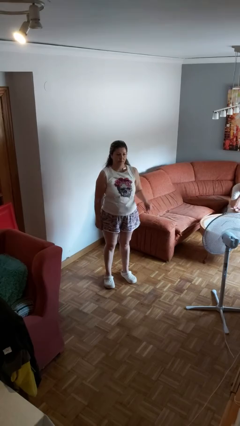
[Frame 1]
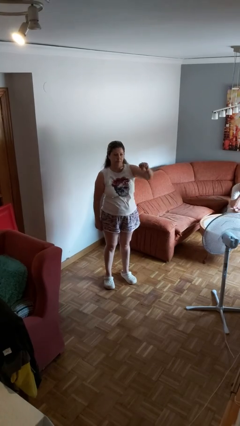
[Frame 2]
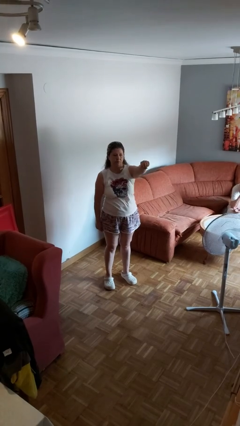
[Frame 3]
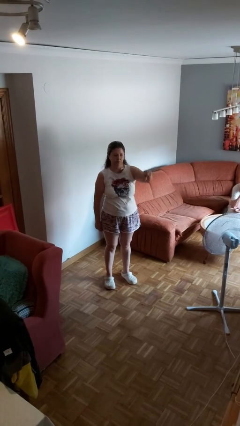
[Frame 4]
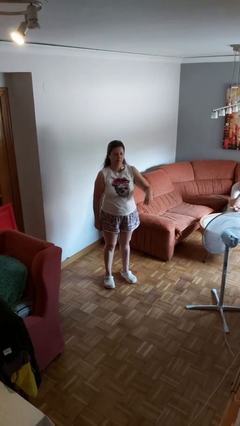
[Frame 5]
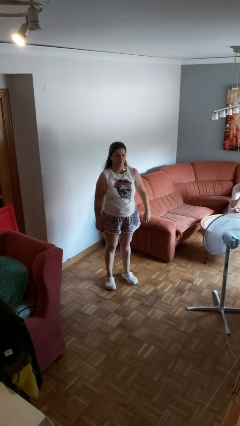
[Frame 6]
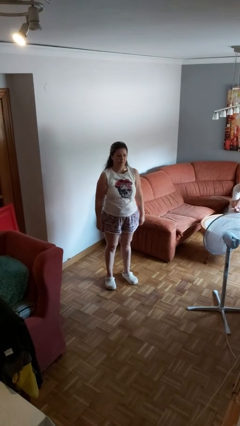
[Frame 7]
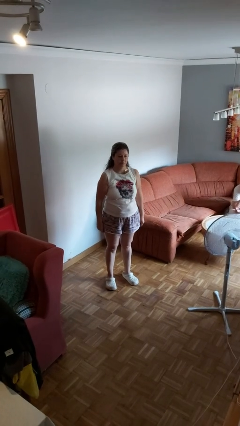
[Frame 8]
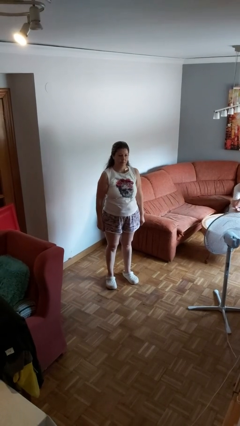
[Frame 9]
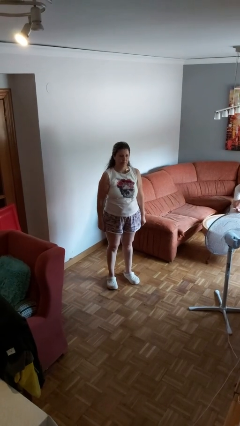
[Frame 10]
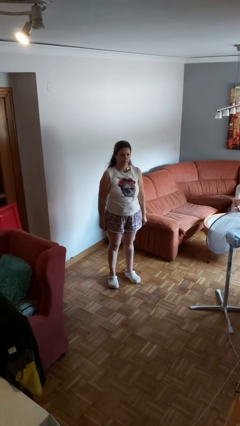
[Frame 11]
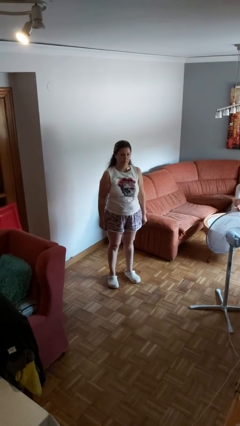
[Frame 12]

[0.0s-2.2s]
person punches

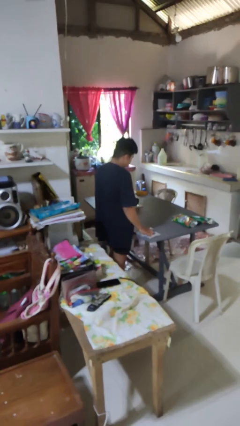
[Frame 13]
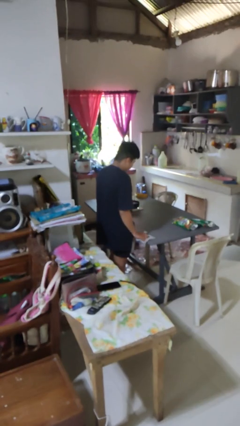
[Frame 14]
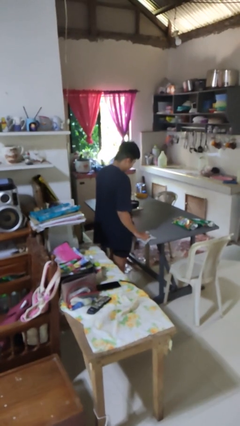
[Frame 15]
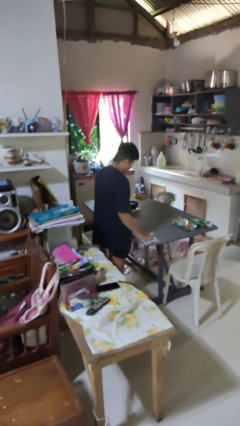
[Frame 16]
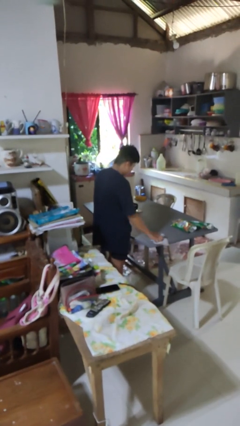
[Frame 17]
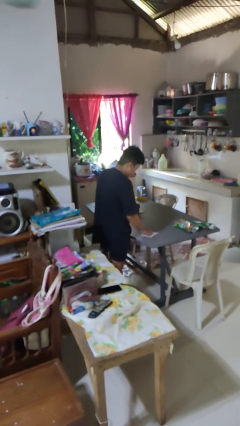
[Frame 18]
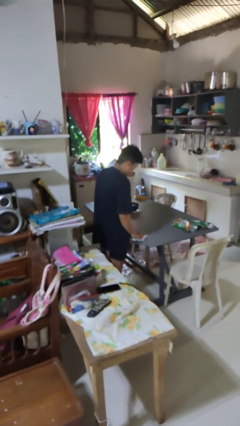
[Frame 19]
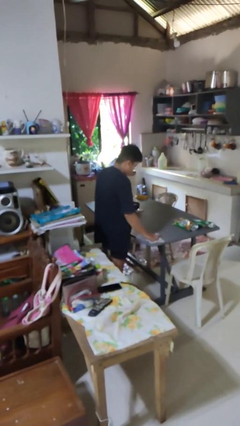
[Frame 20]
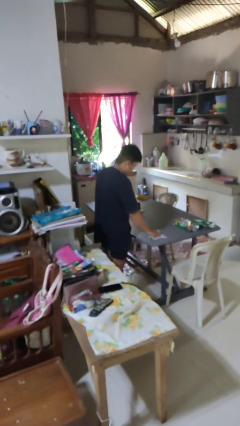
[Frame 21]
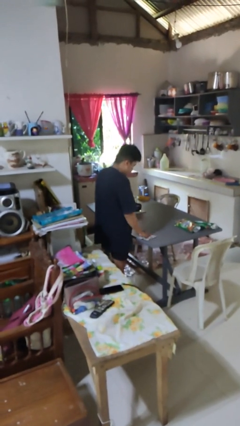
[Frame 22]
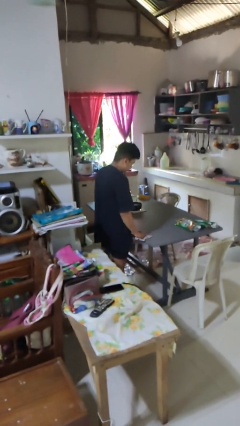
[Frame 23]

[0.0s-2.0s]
person cleans table with rag

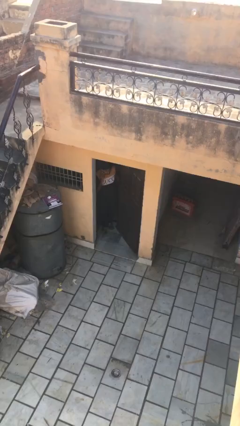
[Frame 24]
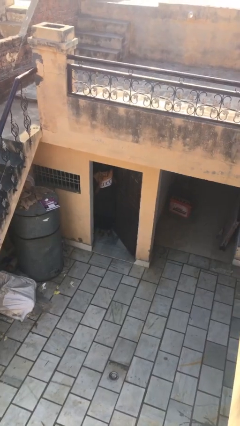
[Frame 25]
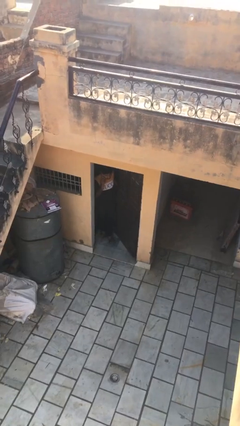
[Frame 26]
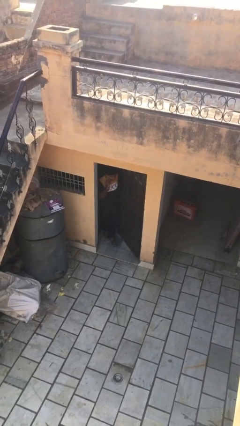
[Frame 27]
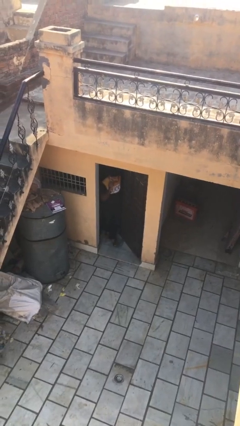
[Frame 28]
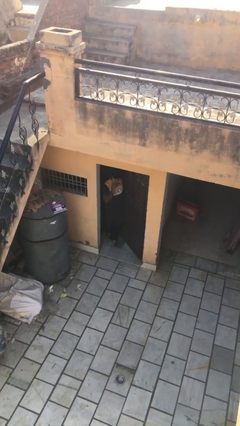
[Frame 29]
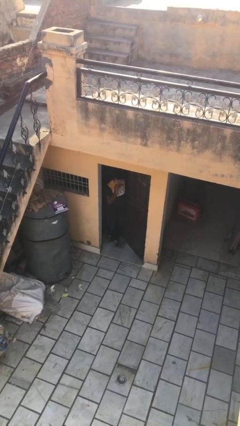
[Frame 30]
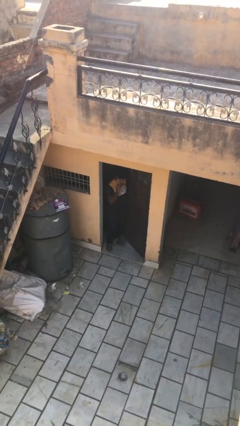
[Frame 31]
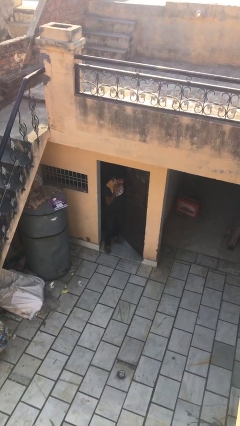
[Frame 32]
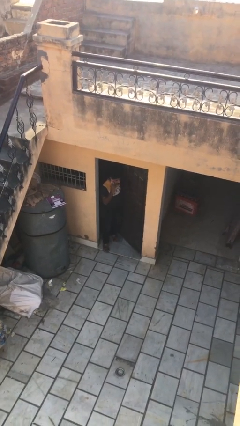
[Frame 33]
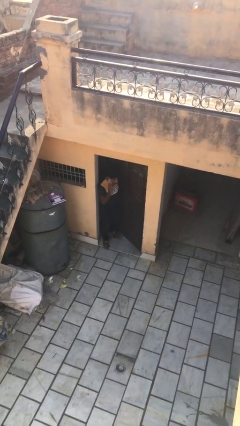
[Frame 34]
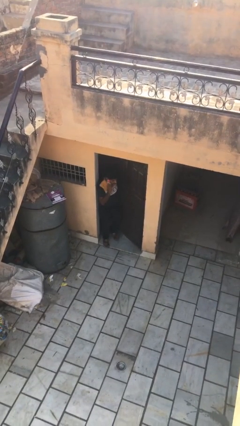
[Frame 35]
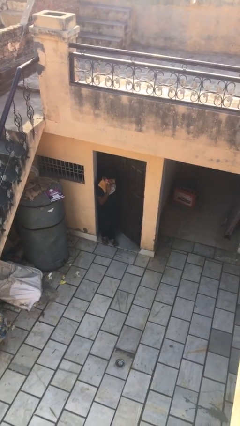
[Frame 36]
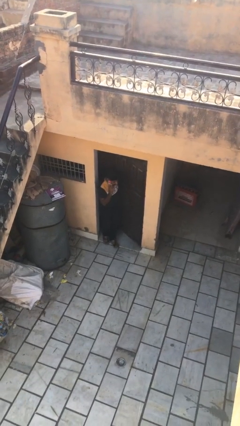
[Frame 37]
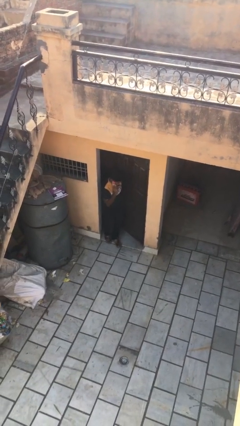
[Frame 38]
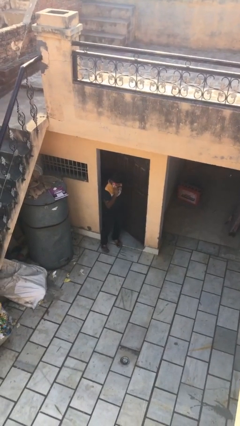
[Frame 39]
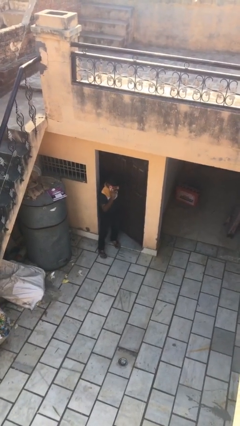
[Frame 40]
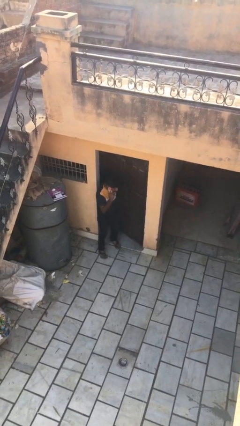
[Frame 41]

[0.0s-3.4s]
person enters scene through structure

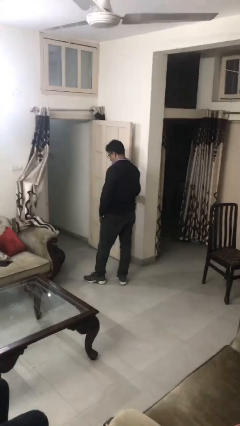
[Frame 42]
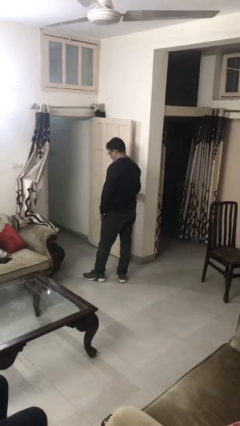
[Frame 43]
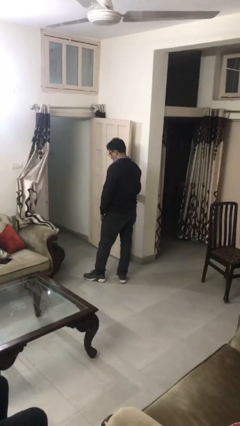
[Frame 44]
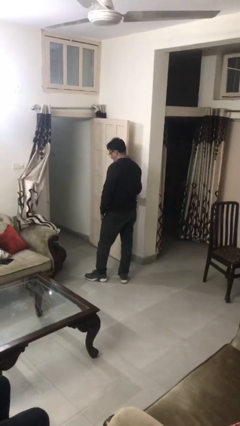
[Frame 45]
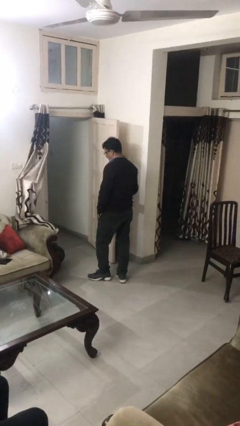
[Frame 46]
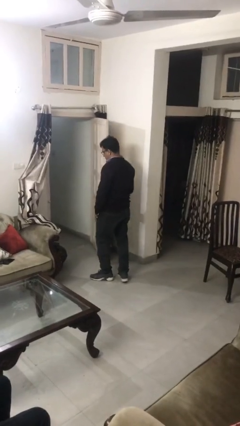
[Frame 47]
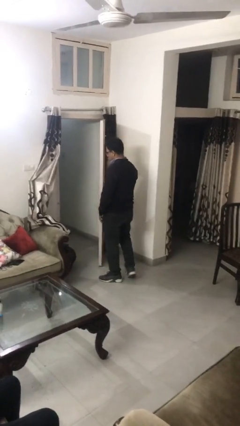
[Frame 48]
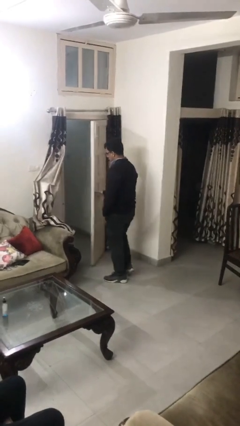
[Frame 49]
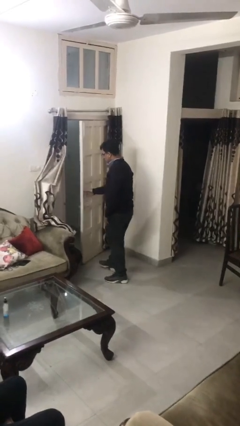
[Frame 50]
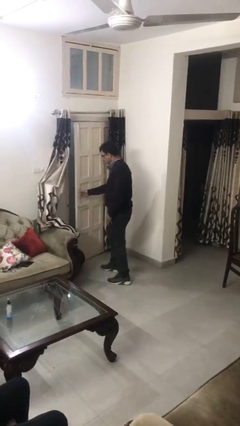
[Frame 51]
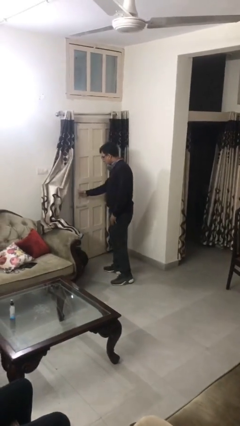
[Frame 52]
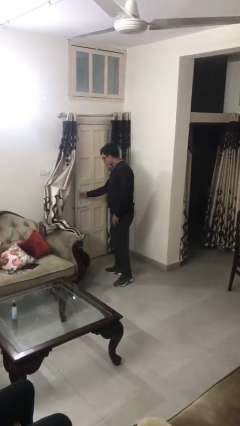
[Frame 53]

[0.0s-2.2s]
person closes facility door

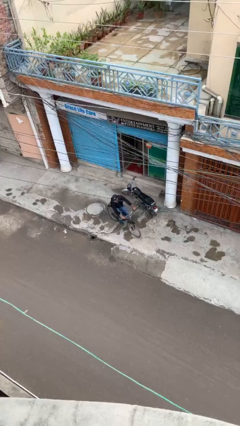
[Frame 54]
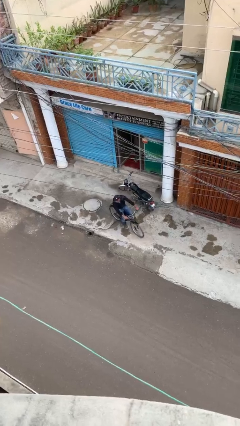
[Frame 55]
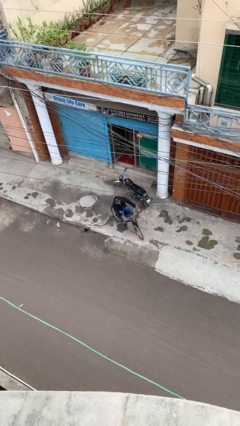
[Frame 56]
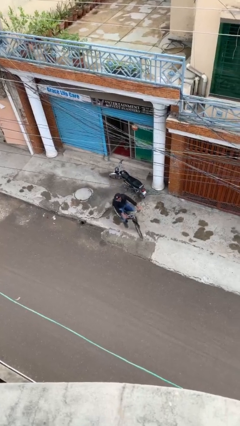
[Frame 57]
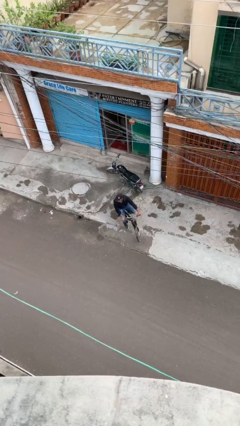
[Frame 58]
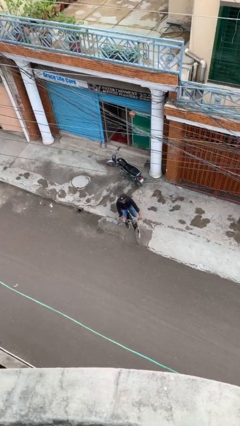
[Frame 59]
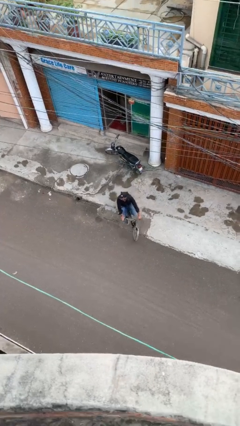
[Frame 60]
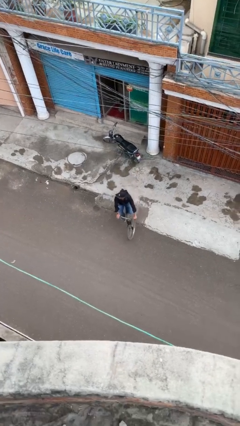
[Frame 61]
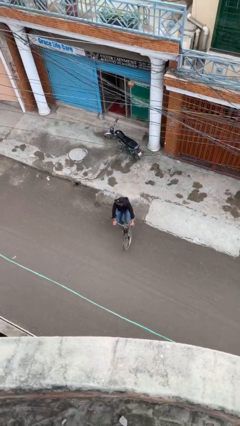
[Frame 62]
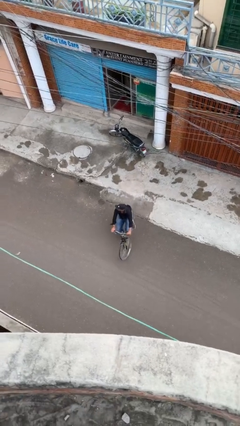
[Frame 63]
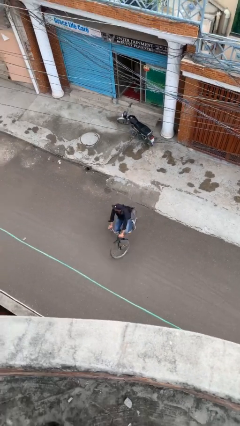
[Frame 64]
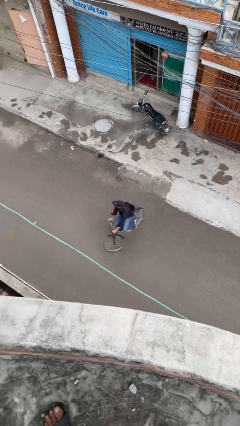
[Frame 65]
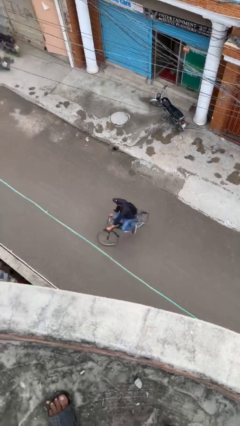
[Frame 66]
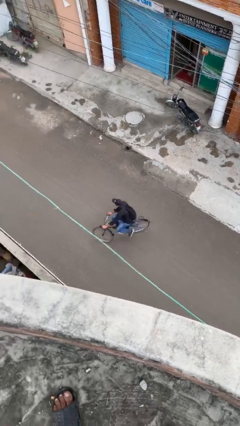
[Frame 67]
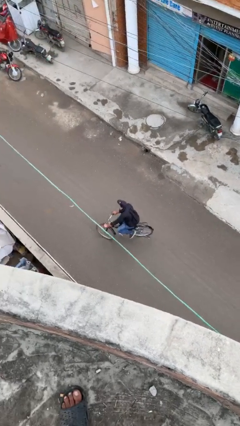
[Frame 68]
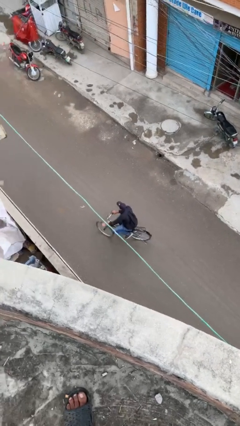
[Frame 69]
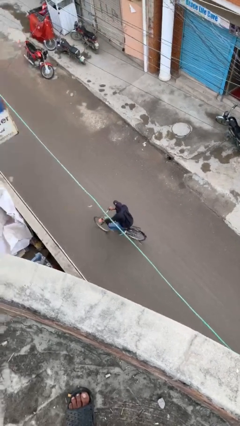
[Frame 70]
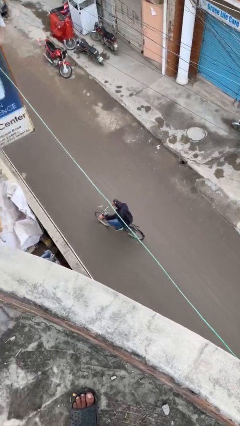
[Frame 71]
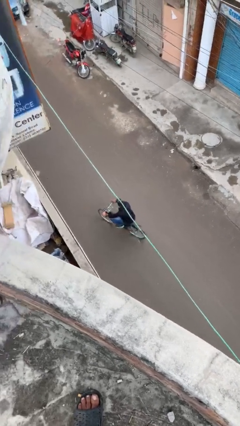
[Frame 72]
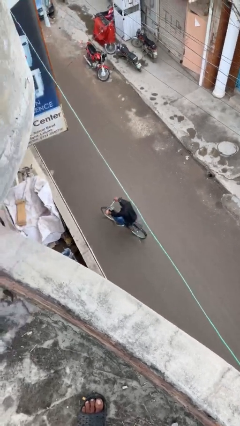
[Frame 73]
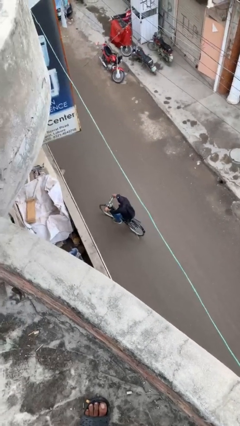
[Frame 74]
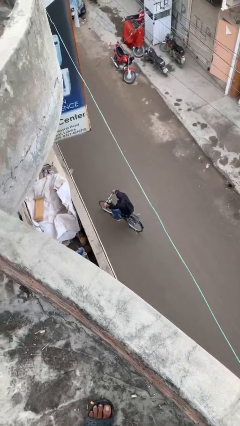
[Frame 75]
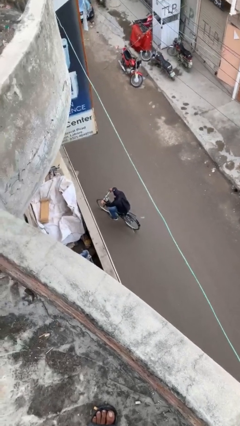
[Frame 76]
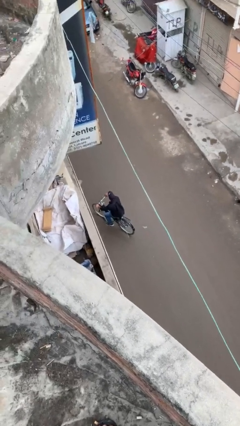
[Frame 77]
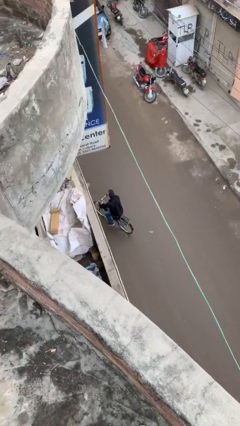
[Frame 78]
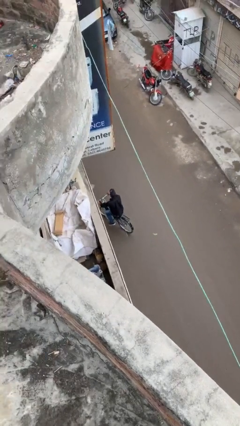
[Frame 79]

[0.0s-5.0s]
person rides bicycle

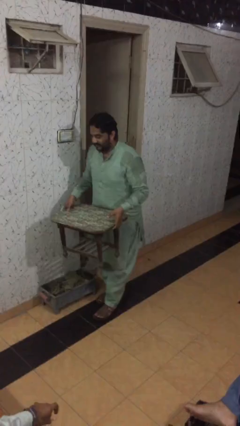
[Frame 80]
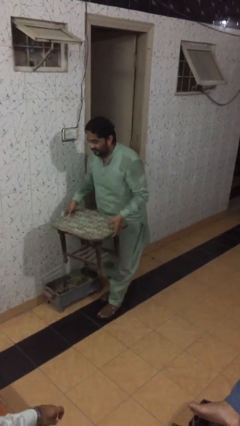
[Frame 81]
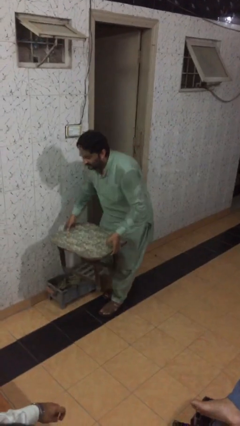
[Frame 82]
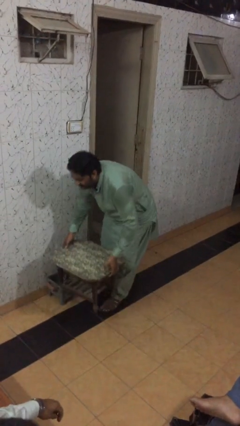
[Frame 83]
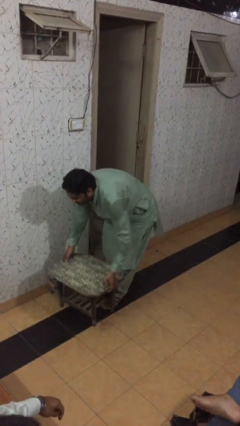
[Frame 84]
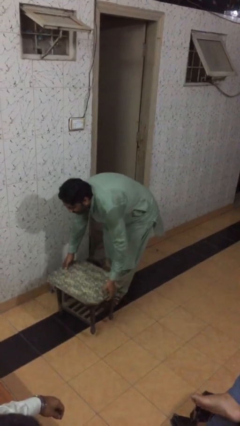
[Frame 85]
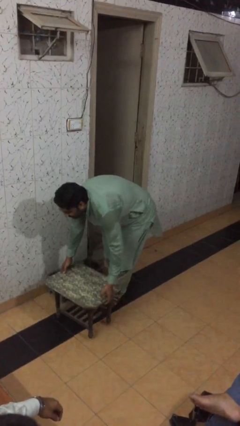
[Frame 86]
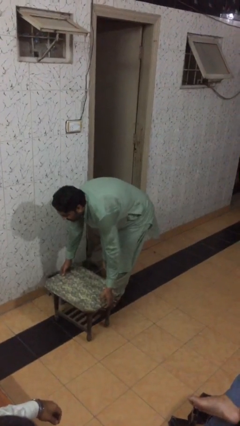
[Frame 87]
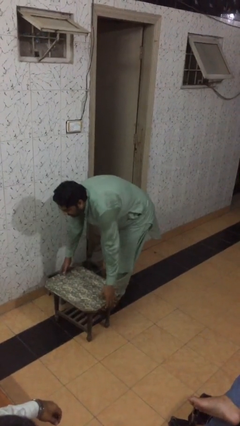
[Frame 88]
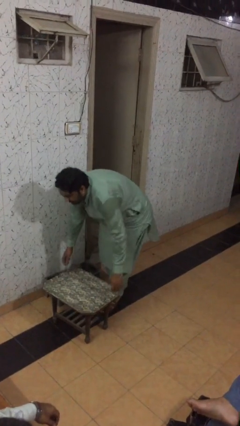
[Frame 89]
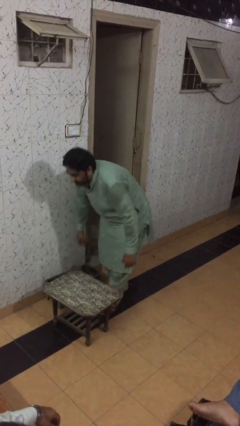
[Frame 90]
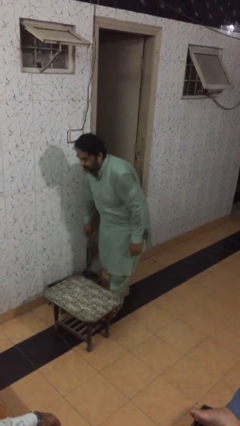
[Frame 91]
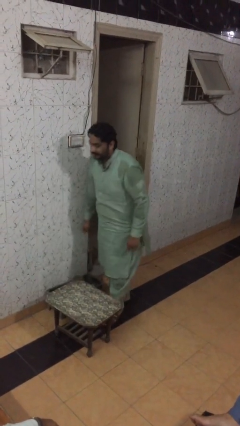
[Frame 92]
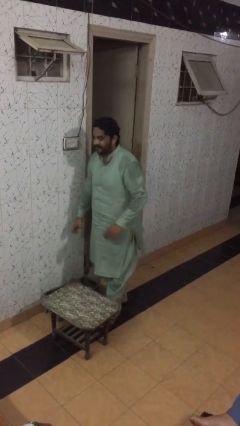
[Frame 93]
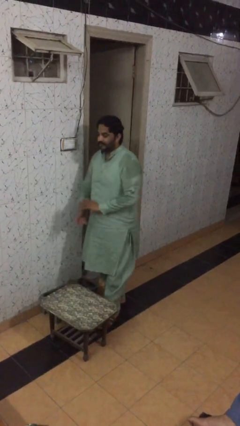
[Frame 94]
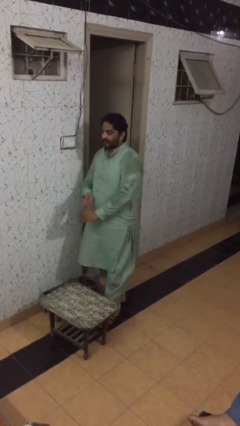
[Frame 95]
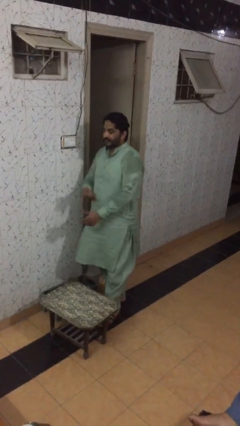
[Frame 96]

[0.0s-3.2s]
person puts down object on floor
